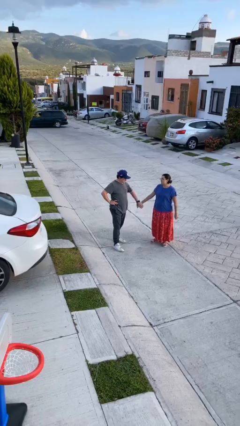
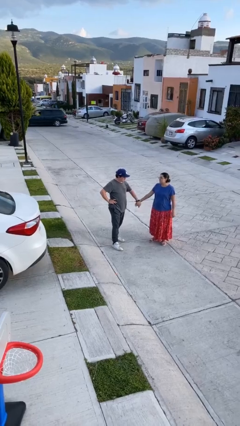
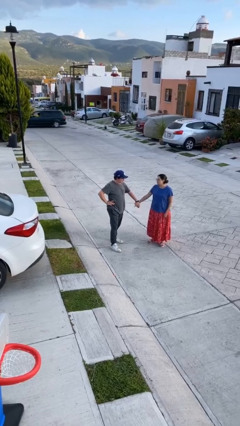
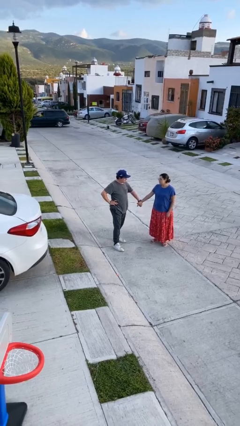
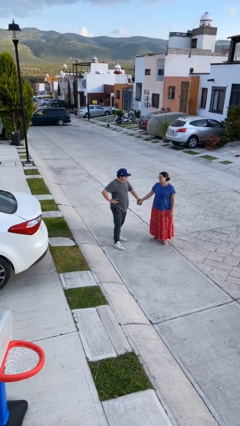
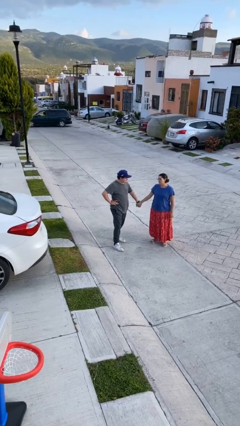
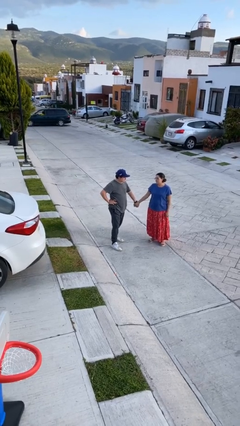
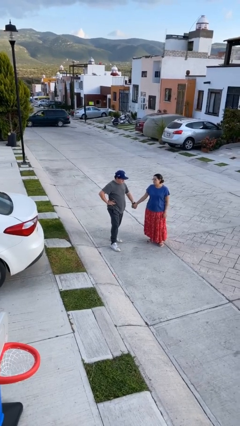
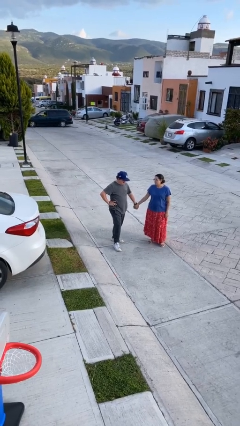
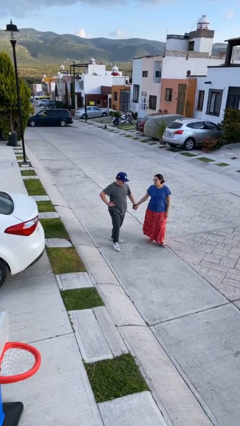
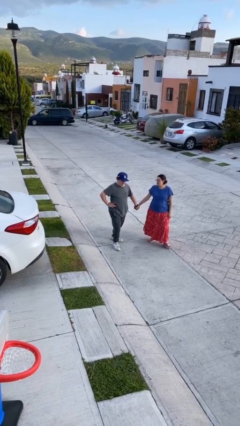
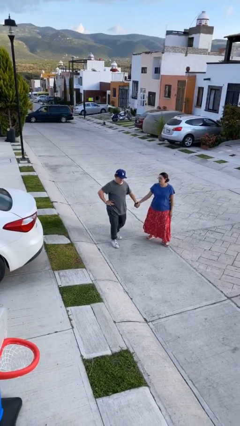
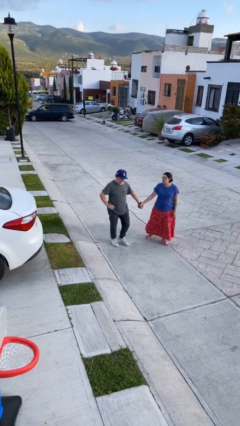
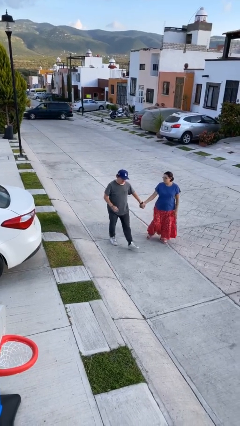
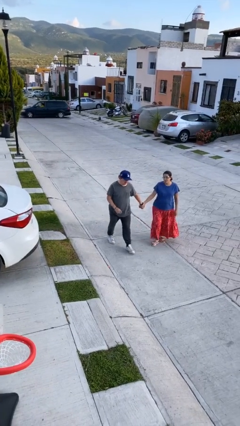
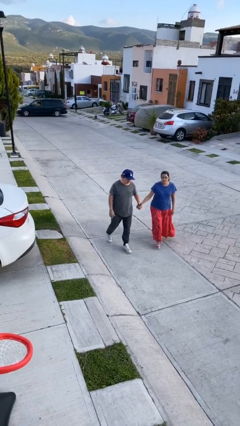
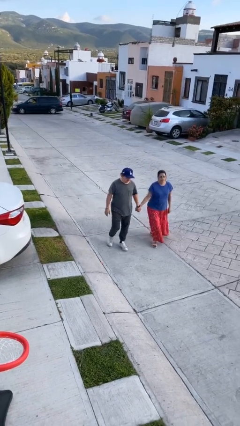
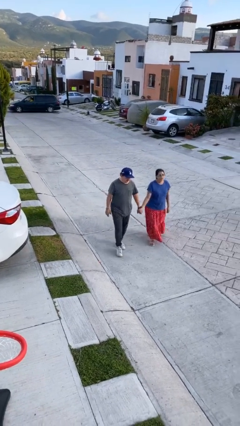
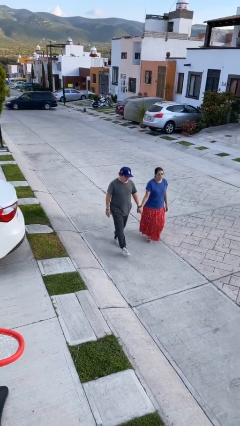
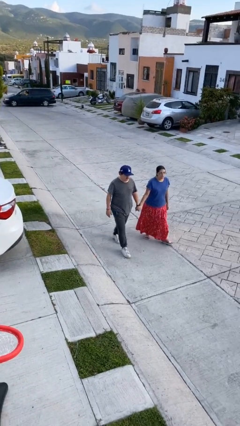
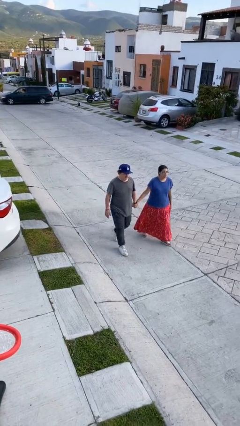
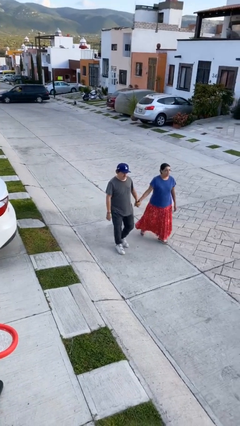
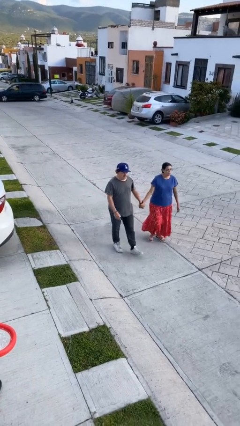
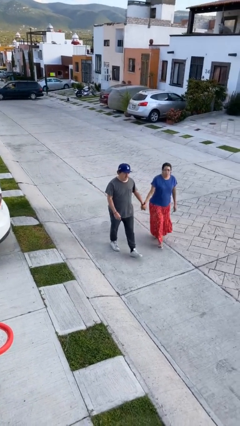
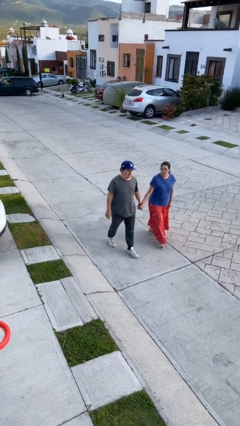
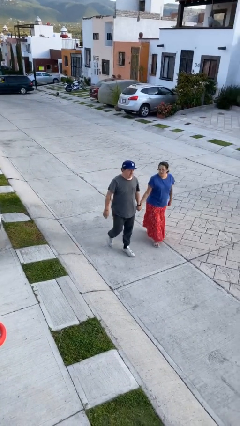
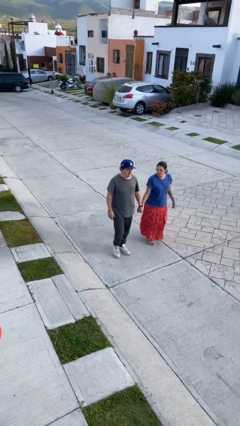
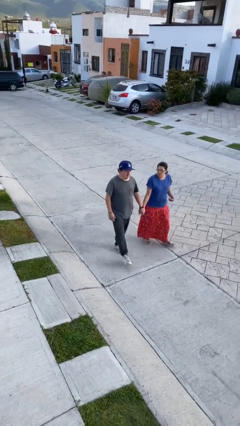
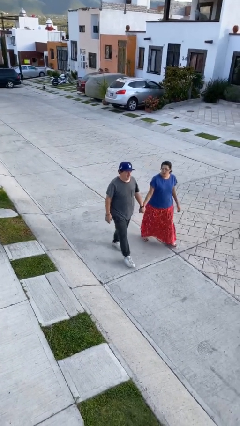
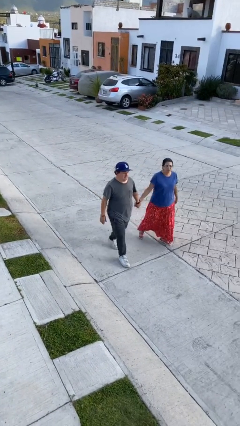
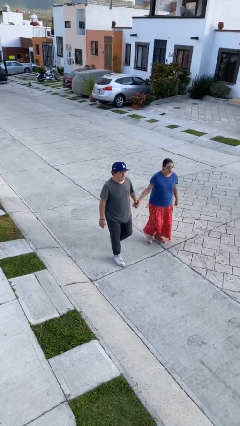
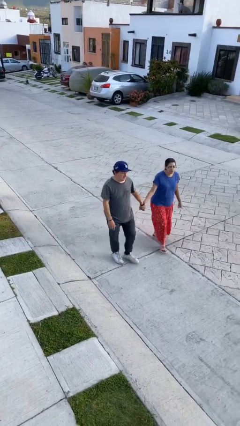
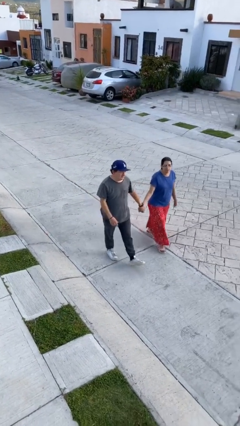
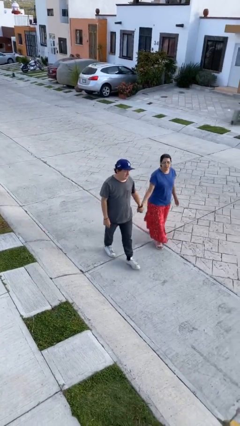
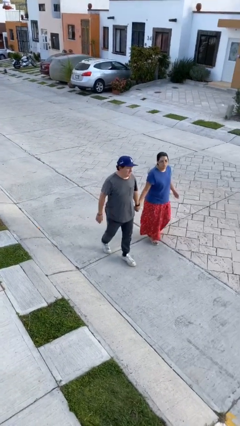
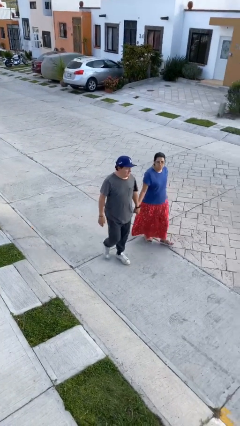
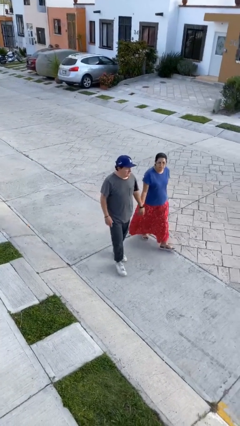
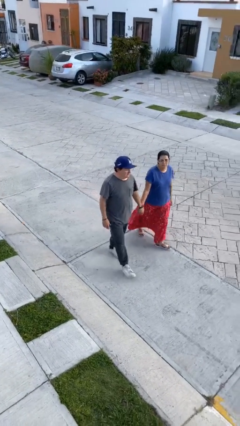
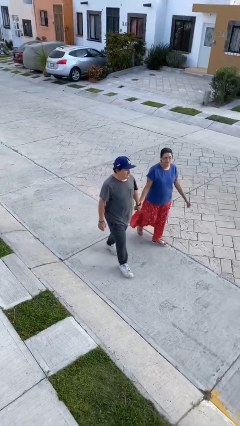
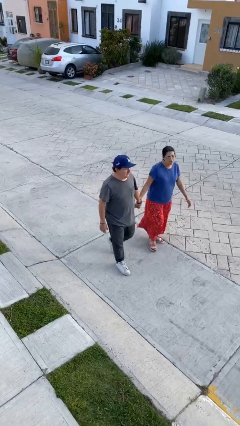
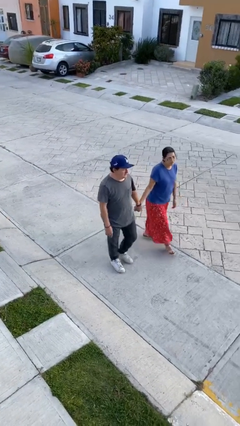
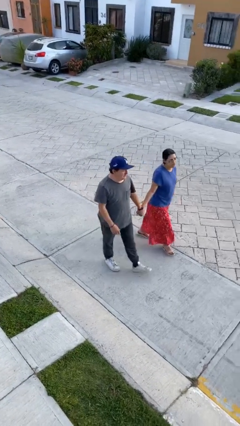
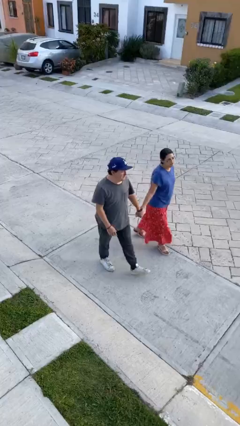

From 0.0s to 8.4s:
person holds hand

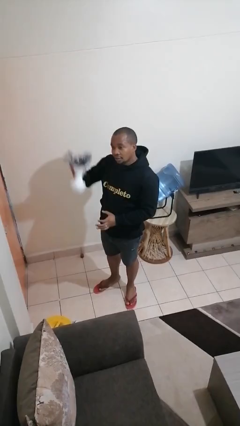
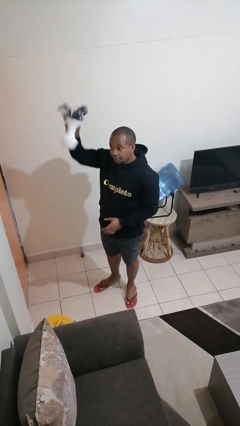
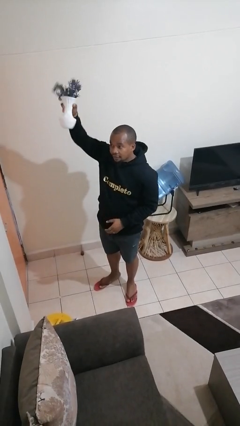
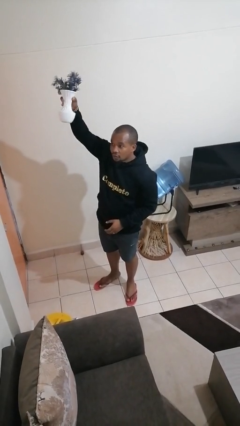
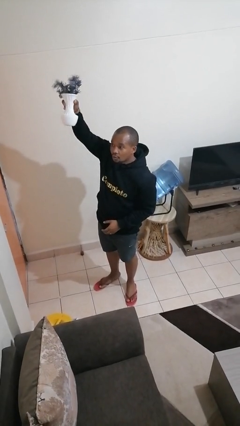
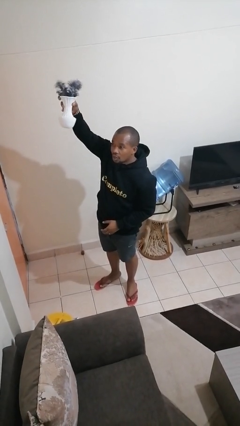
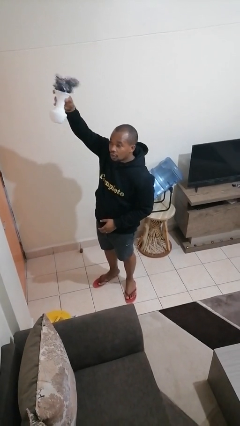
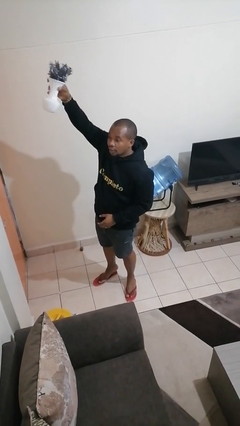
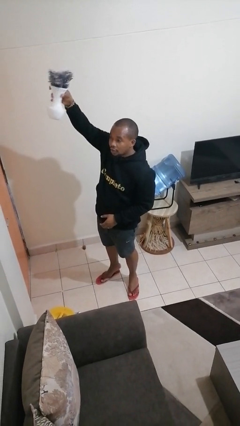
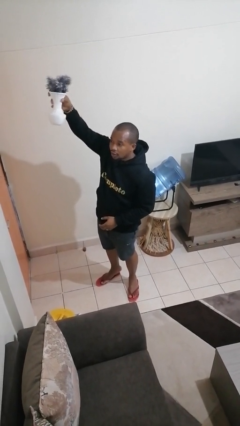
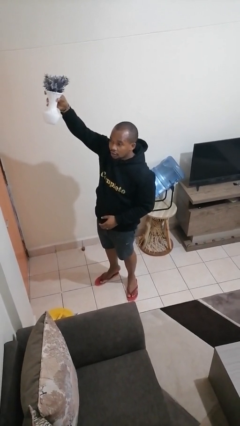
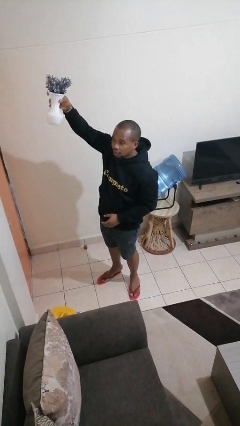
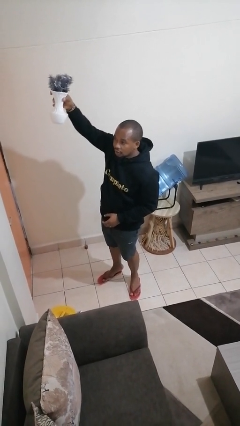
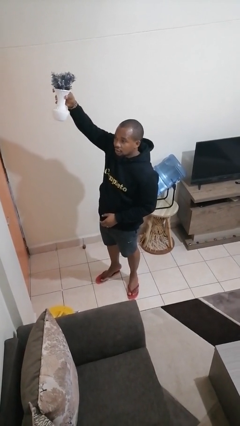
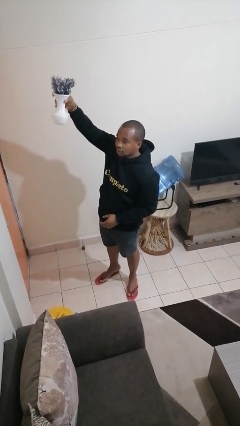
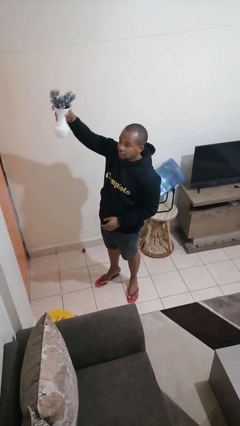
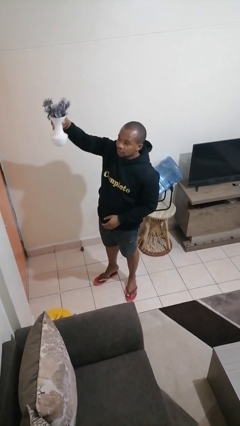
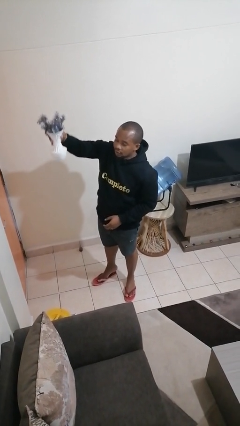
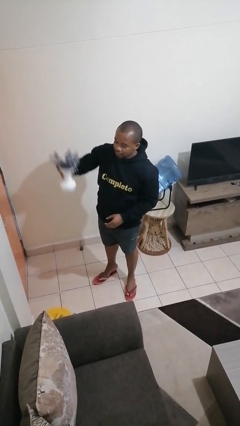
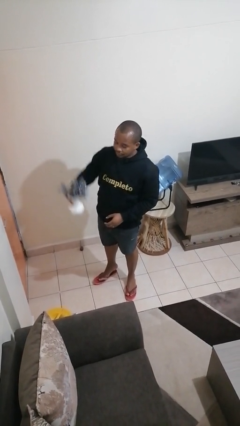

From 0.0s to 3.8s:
person holds object above head

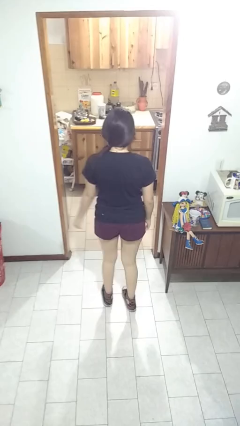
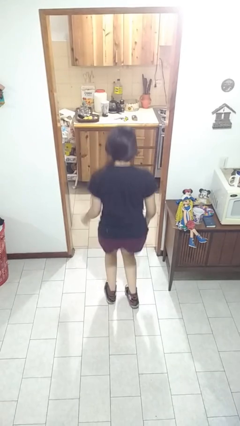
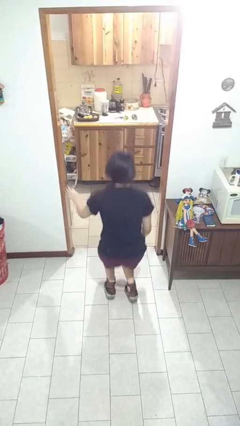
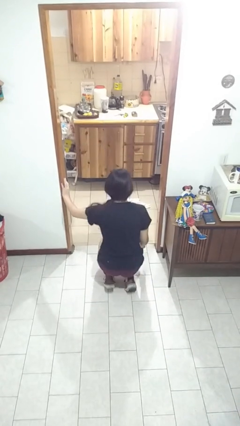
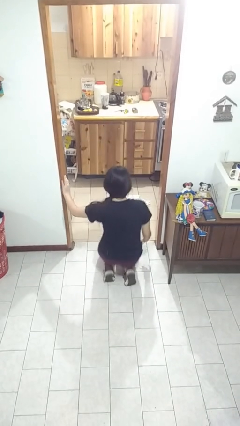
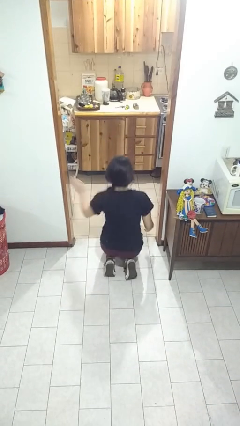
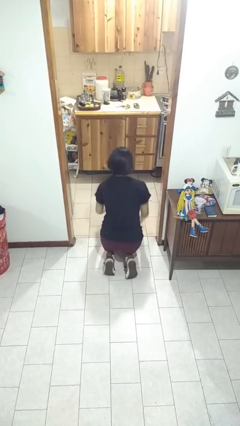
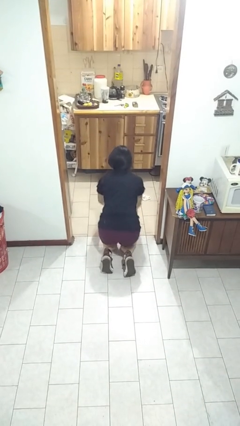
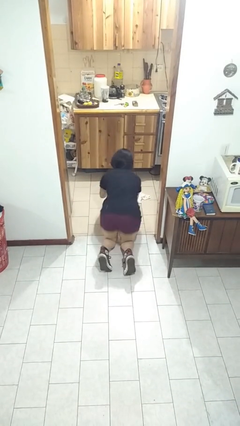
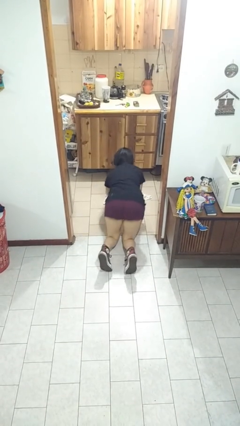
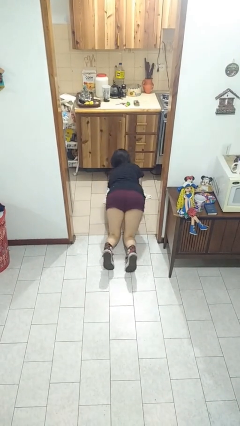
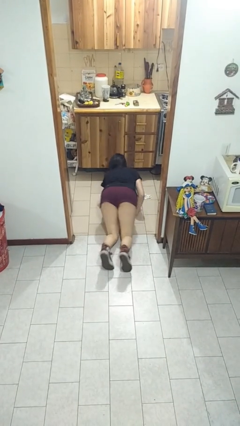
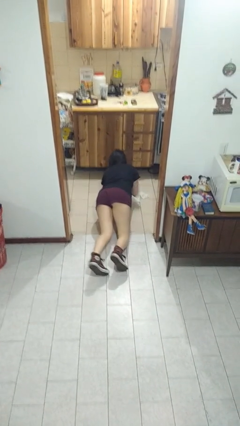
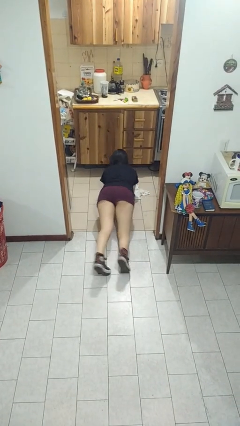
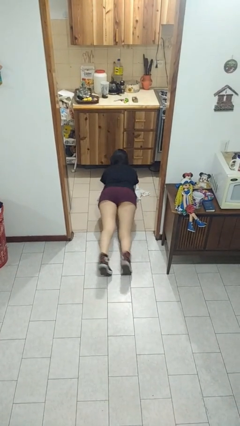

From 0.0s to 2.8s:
person exercises with plank

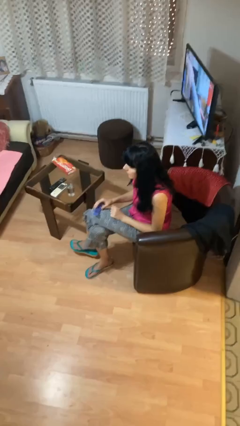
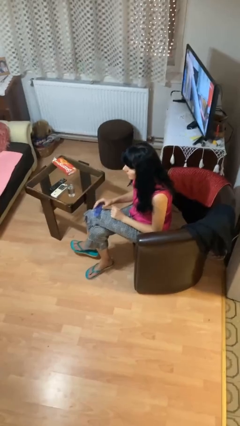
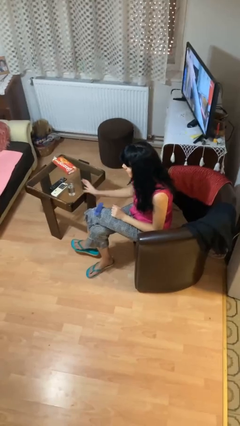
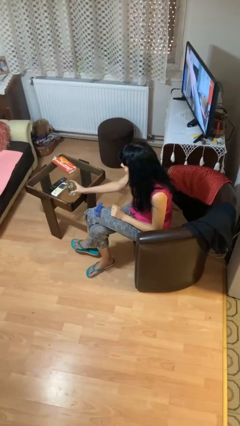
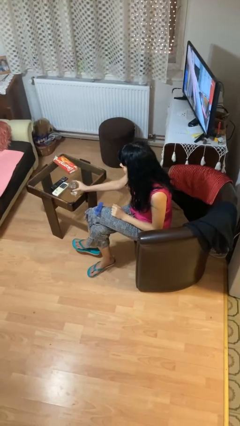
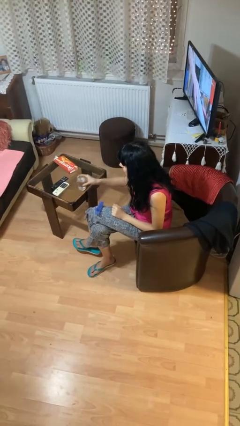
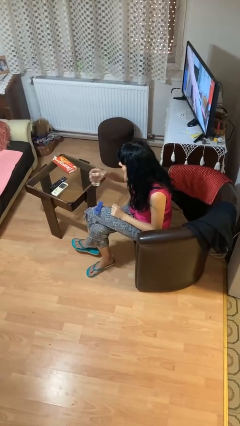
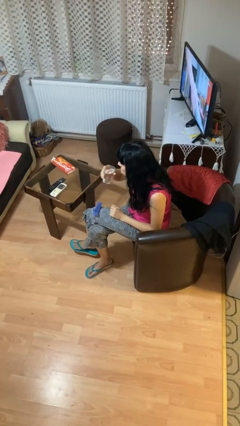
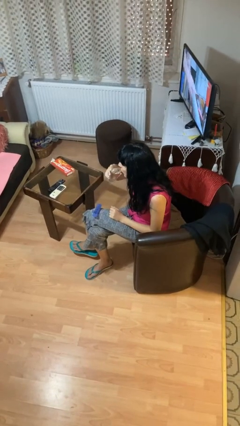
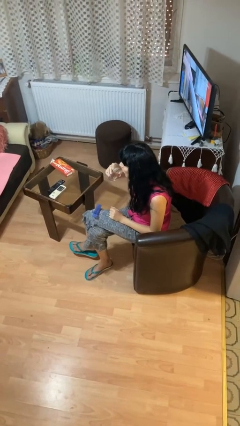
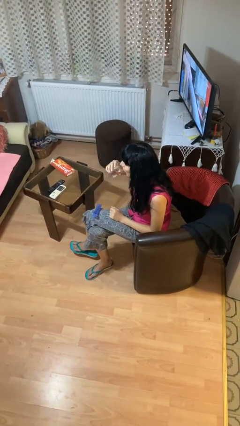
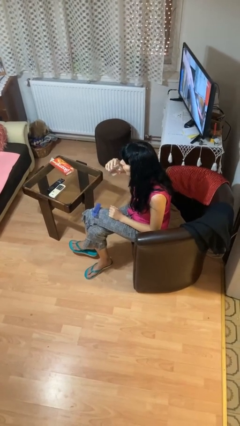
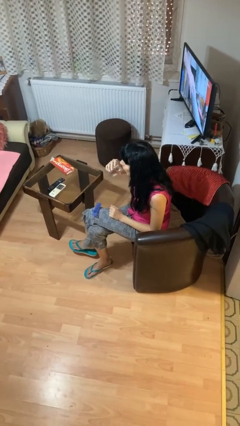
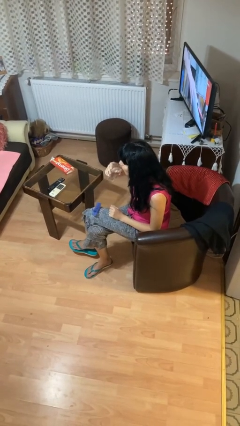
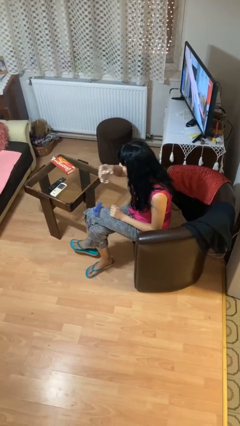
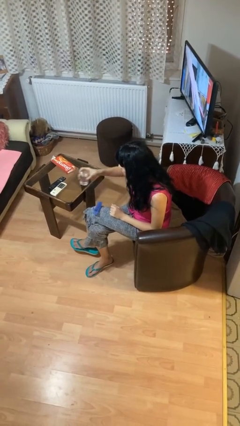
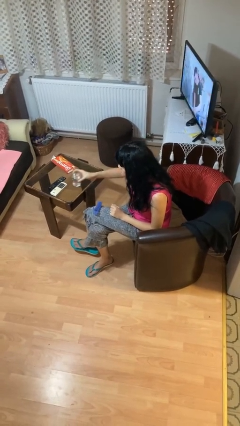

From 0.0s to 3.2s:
person drinks from cup
